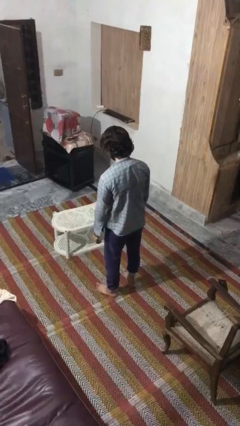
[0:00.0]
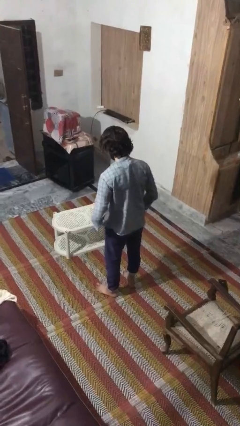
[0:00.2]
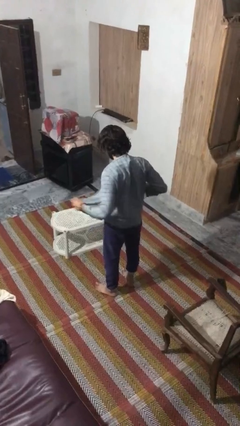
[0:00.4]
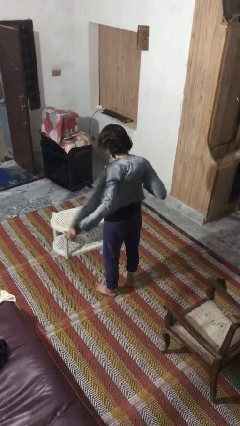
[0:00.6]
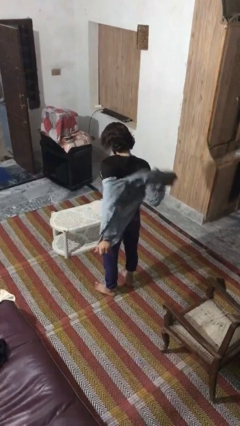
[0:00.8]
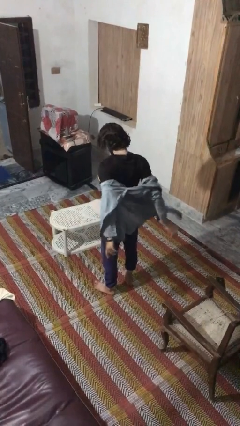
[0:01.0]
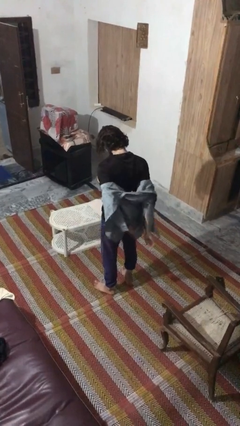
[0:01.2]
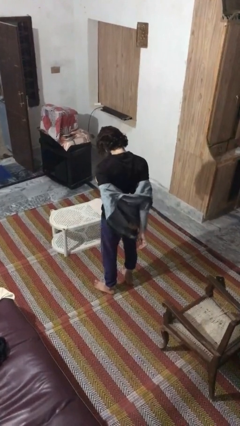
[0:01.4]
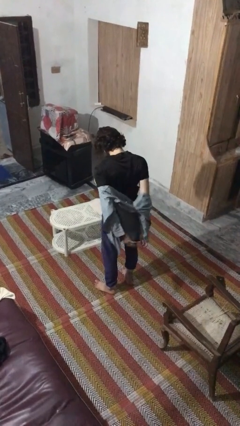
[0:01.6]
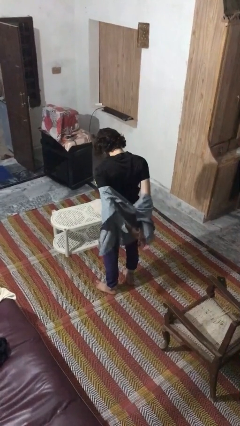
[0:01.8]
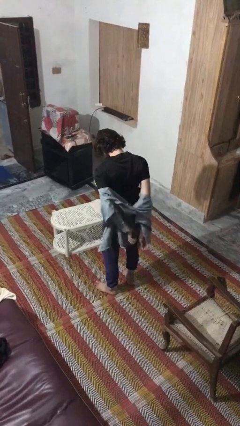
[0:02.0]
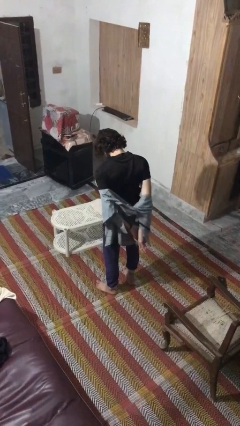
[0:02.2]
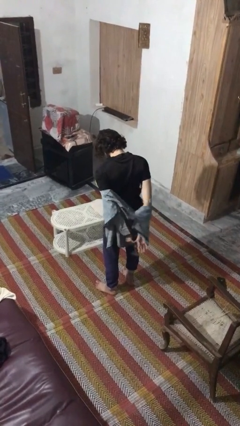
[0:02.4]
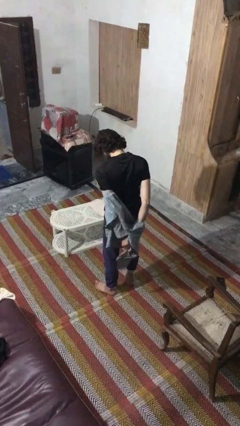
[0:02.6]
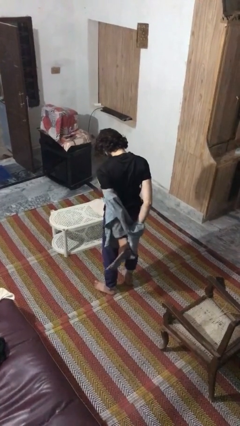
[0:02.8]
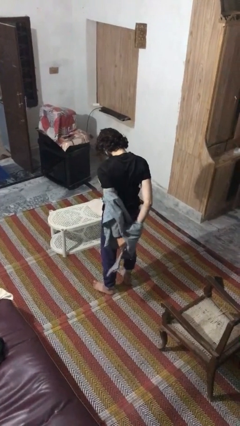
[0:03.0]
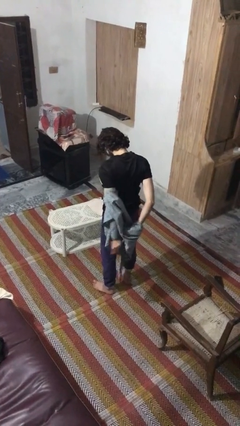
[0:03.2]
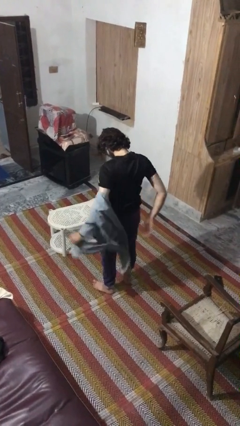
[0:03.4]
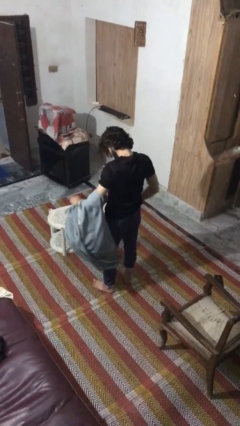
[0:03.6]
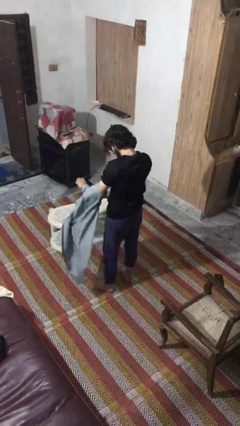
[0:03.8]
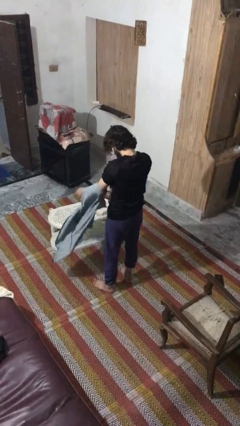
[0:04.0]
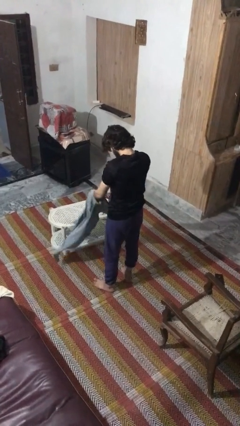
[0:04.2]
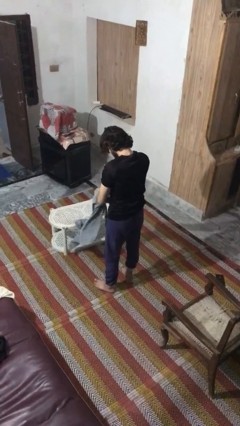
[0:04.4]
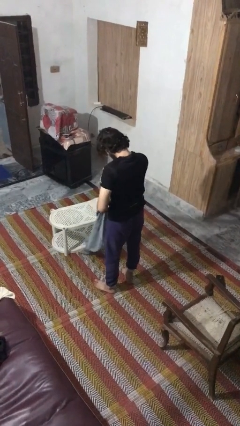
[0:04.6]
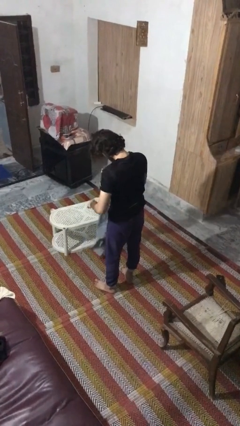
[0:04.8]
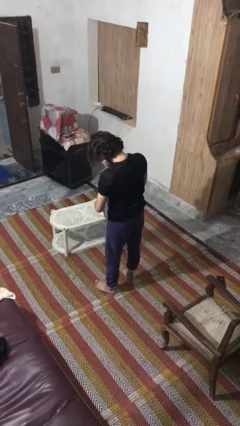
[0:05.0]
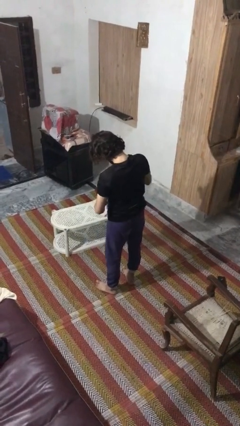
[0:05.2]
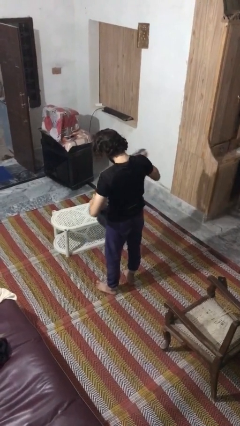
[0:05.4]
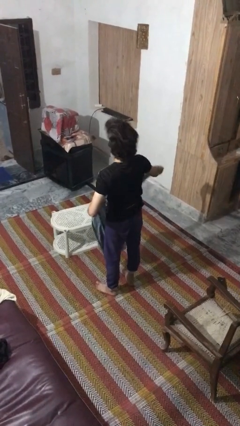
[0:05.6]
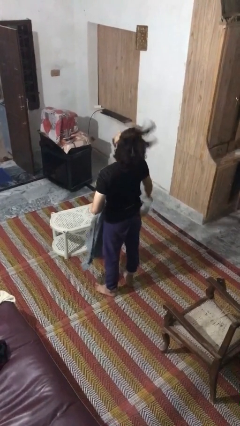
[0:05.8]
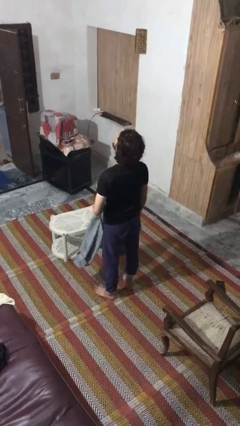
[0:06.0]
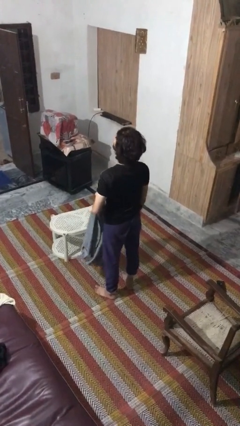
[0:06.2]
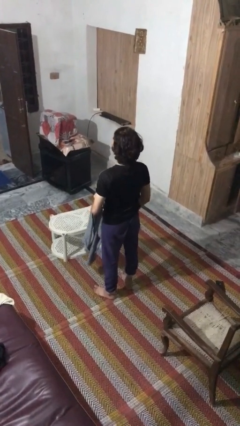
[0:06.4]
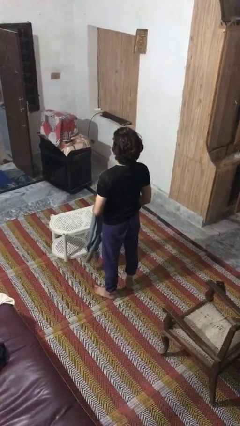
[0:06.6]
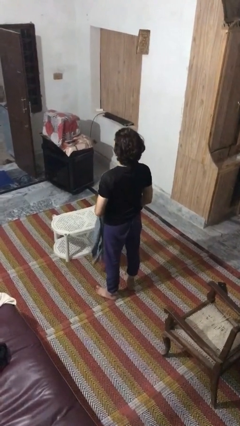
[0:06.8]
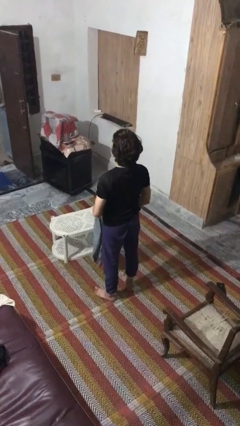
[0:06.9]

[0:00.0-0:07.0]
person takes off shirt

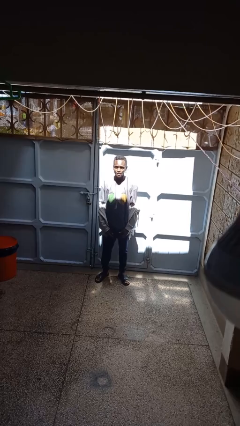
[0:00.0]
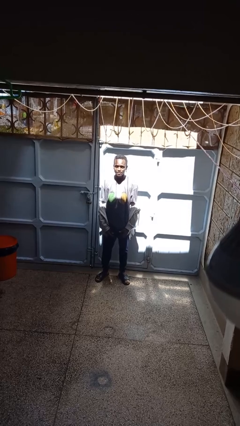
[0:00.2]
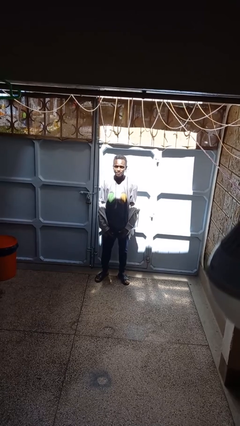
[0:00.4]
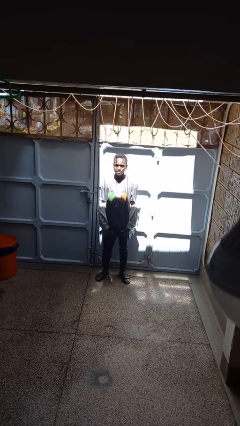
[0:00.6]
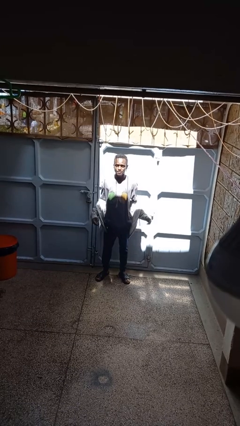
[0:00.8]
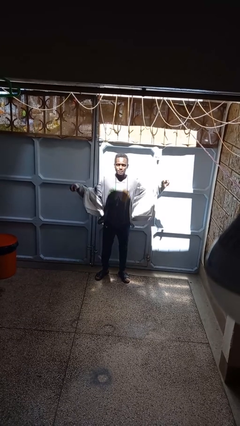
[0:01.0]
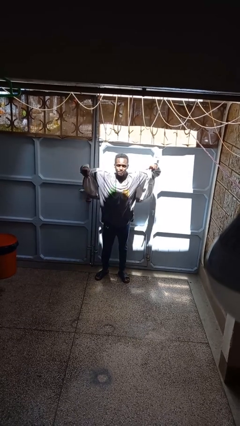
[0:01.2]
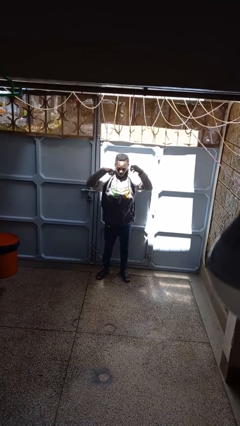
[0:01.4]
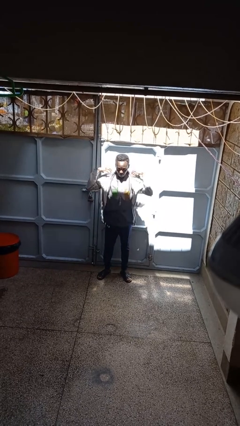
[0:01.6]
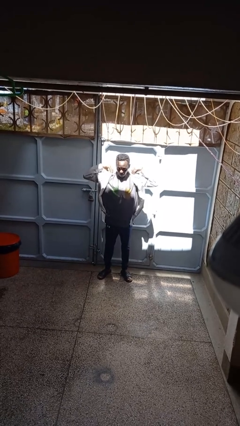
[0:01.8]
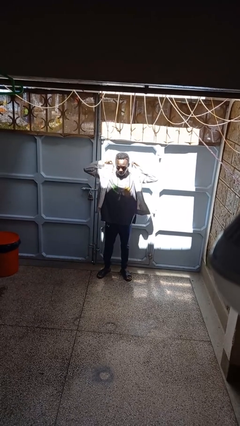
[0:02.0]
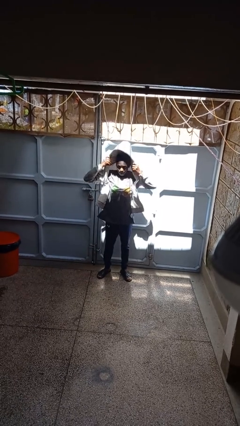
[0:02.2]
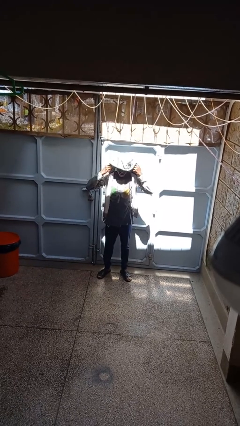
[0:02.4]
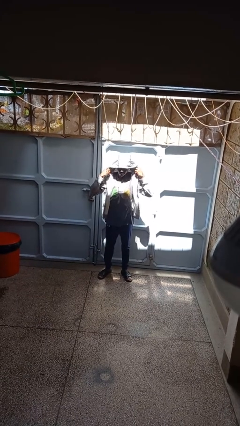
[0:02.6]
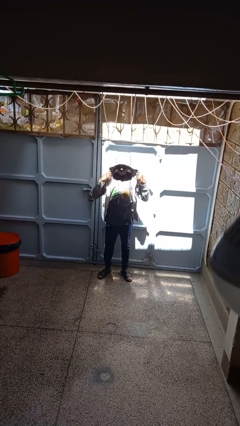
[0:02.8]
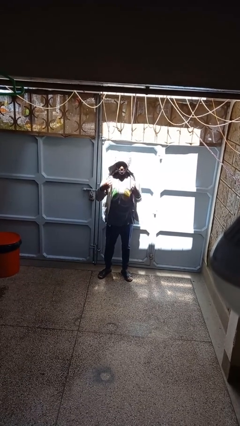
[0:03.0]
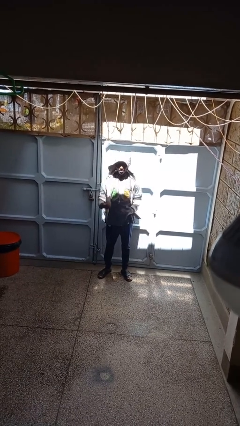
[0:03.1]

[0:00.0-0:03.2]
person puts on hoodie

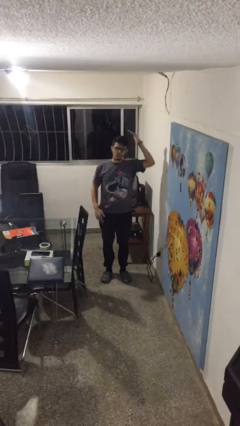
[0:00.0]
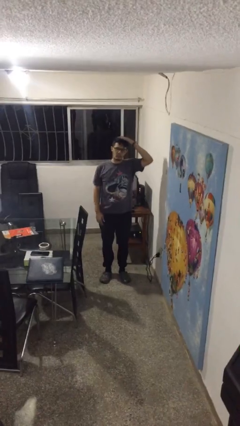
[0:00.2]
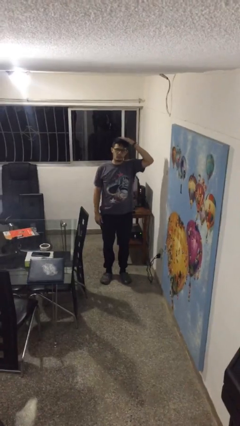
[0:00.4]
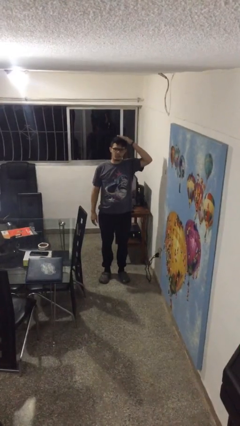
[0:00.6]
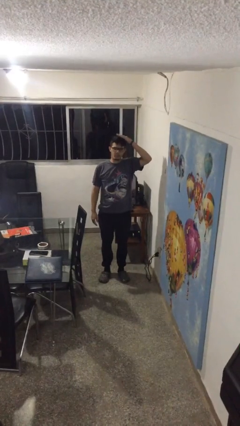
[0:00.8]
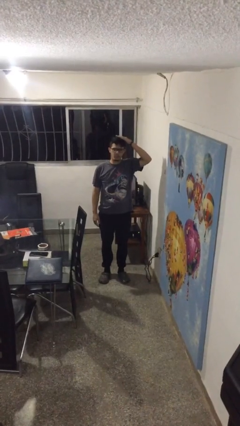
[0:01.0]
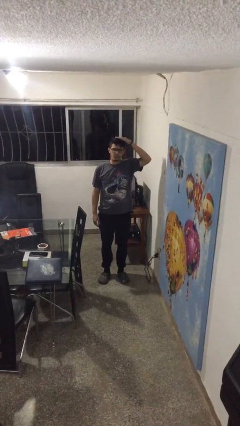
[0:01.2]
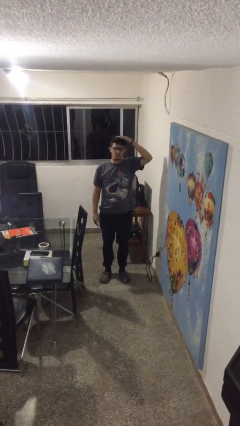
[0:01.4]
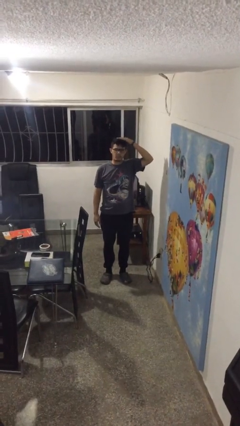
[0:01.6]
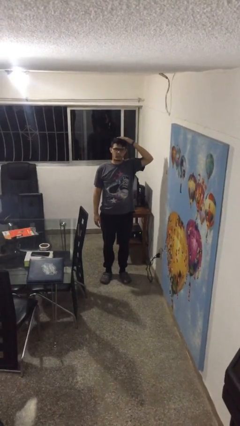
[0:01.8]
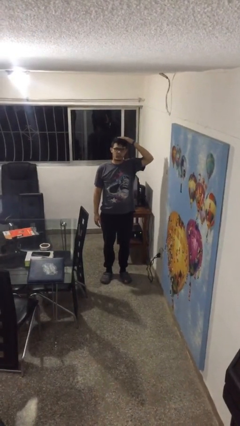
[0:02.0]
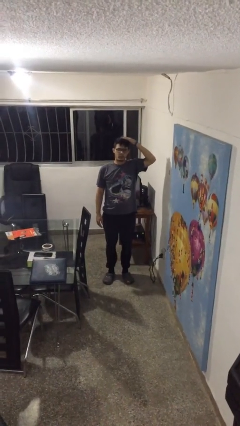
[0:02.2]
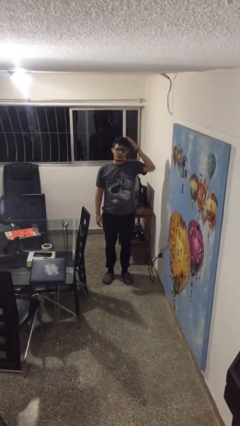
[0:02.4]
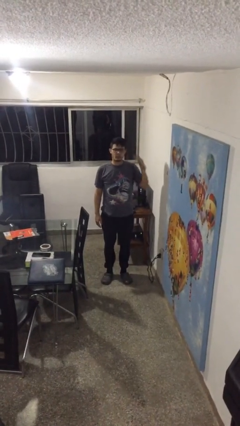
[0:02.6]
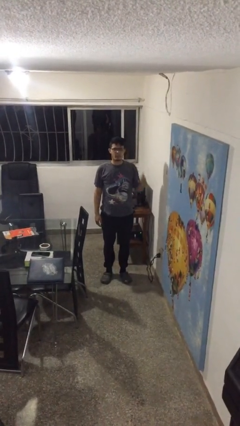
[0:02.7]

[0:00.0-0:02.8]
person pats head

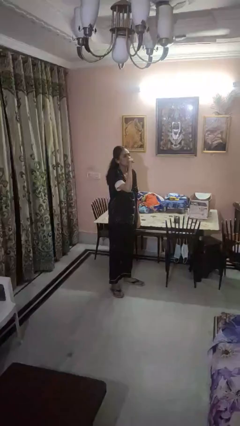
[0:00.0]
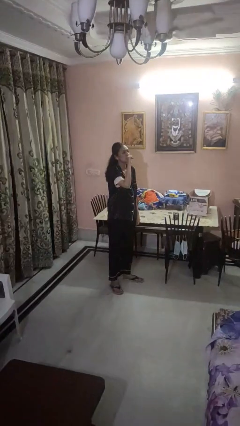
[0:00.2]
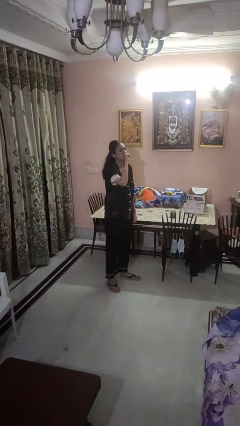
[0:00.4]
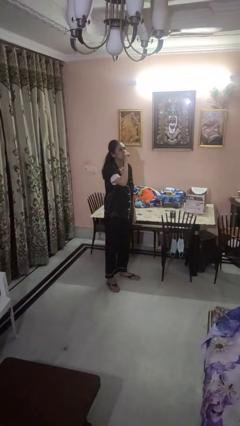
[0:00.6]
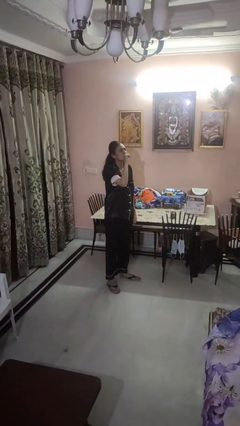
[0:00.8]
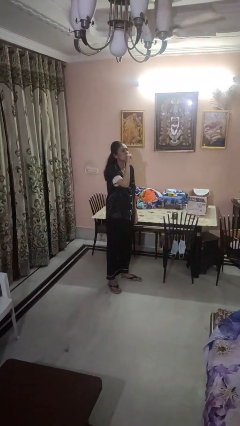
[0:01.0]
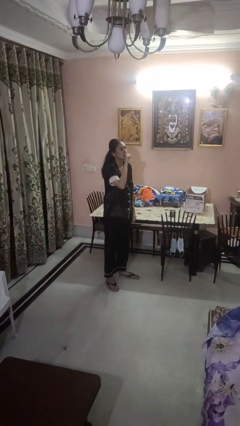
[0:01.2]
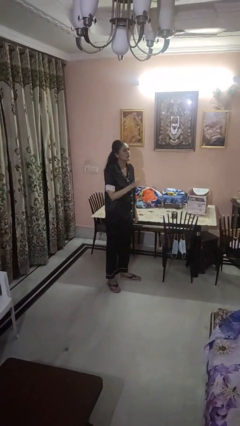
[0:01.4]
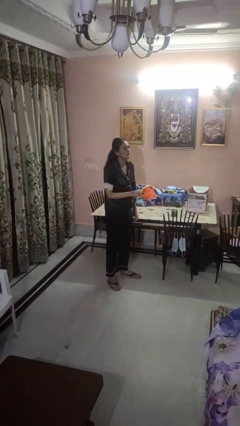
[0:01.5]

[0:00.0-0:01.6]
person vapes

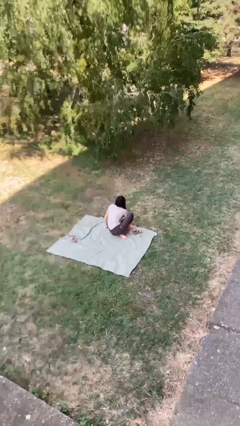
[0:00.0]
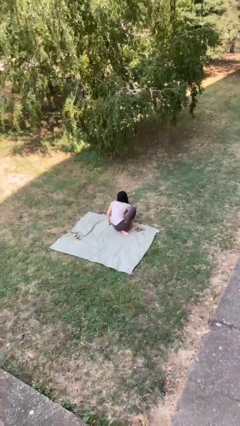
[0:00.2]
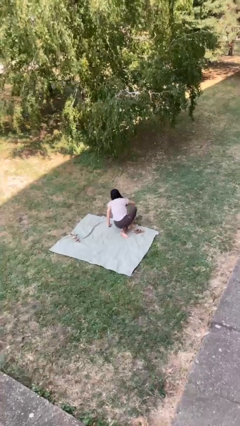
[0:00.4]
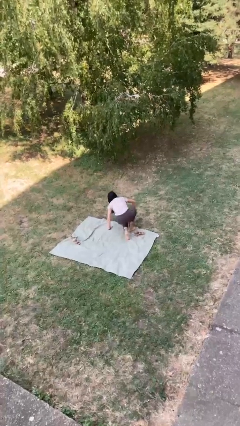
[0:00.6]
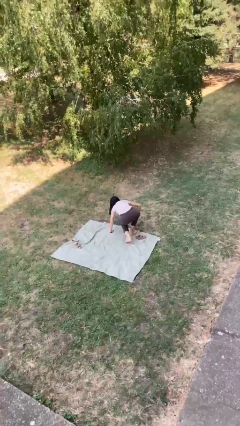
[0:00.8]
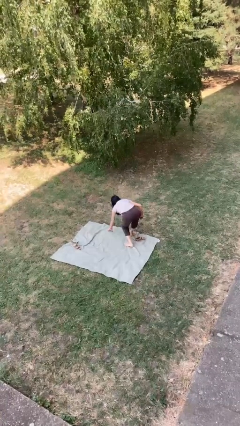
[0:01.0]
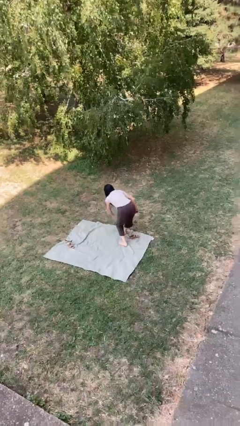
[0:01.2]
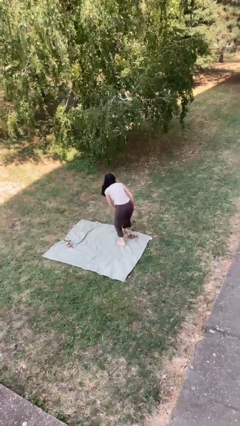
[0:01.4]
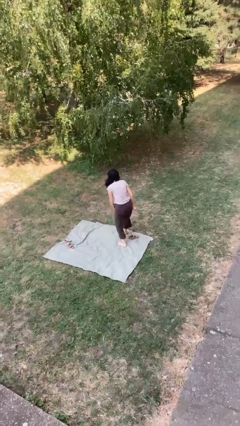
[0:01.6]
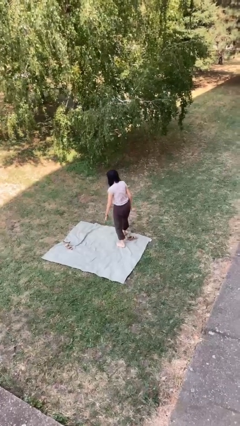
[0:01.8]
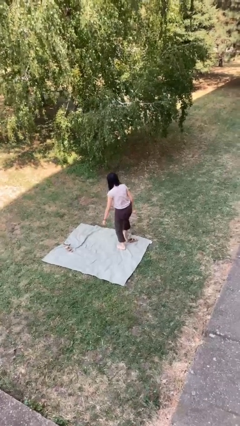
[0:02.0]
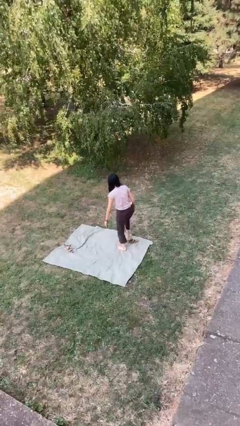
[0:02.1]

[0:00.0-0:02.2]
person stands up from floor

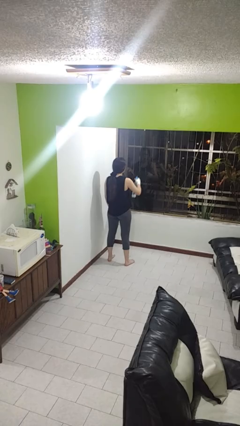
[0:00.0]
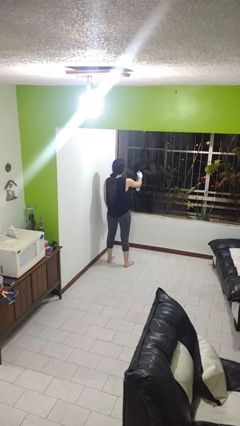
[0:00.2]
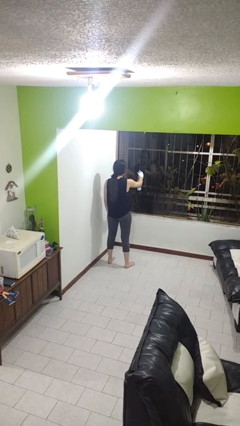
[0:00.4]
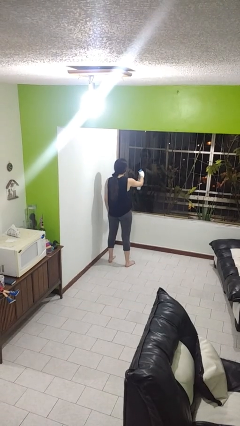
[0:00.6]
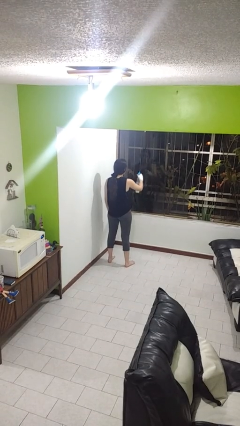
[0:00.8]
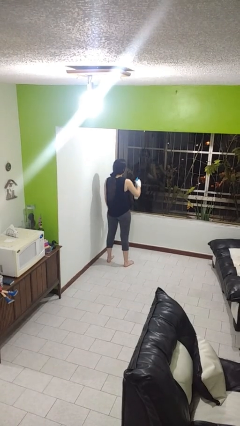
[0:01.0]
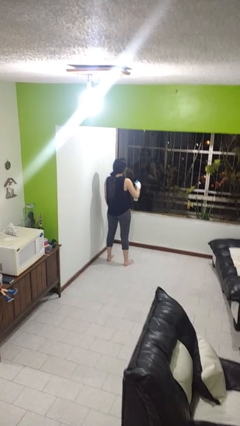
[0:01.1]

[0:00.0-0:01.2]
person sprays from bottle
